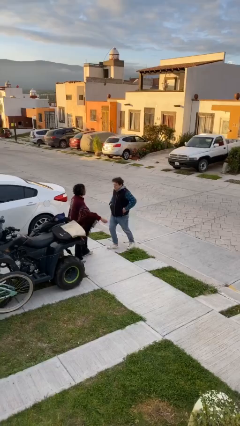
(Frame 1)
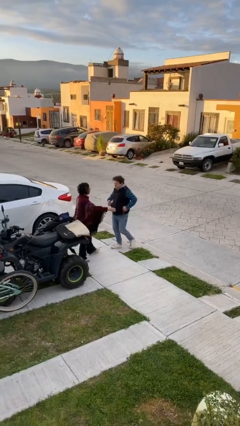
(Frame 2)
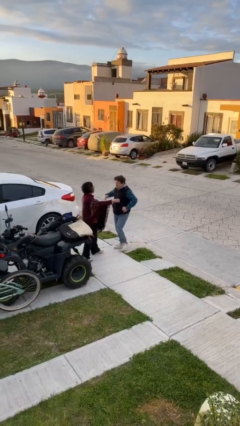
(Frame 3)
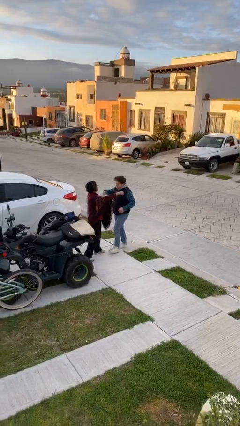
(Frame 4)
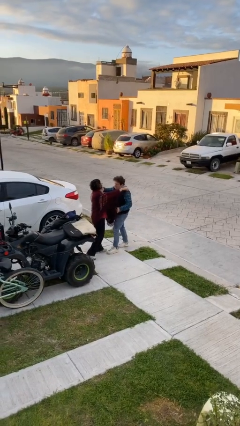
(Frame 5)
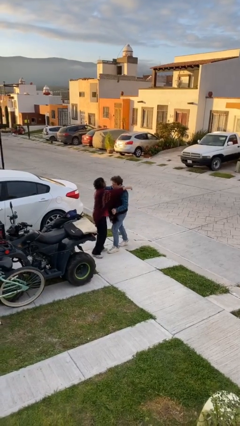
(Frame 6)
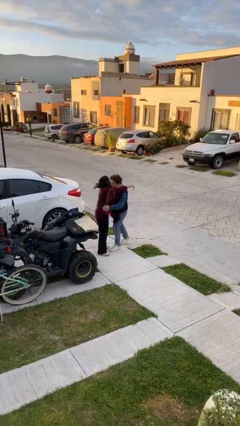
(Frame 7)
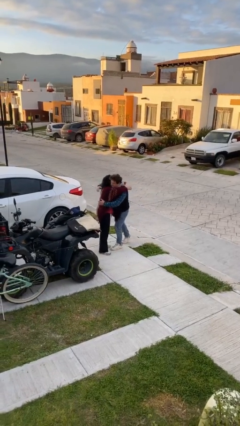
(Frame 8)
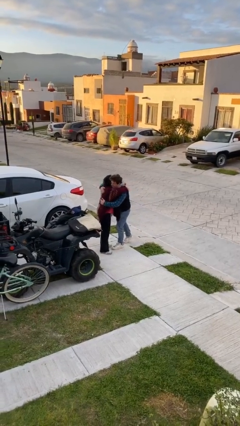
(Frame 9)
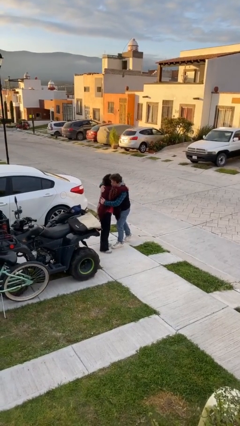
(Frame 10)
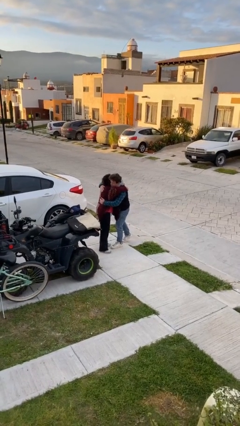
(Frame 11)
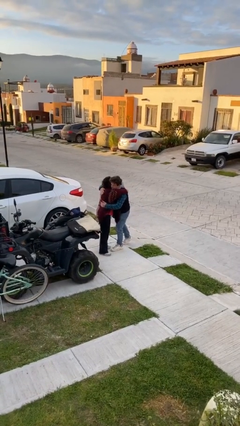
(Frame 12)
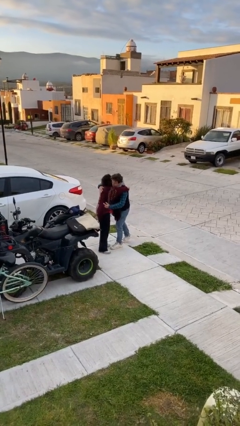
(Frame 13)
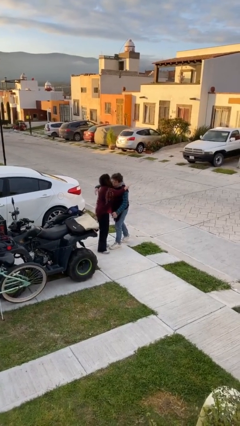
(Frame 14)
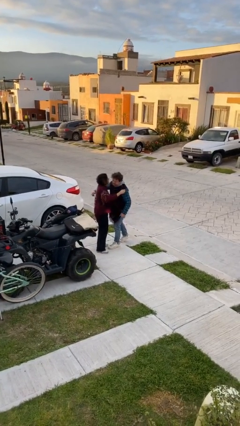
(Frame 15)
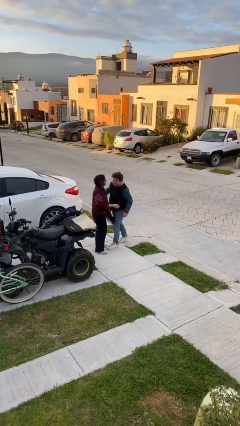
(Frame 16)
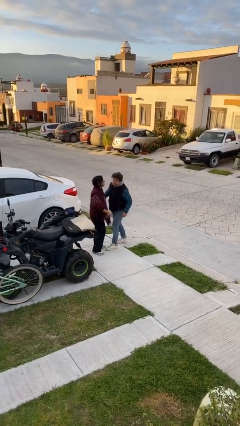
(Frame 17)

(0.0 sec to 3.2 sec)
person embraces person

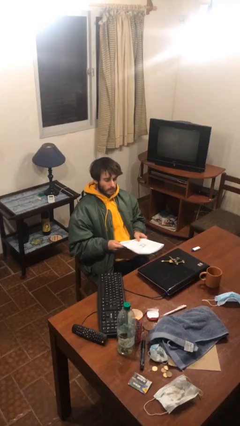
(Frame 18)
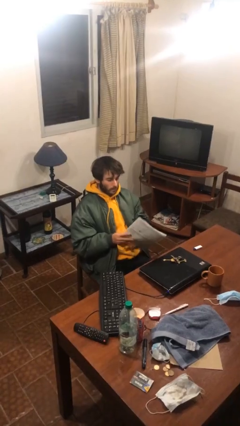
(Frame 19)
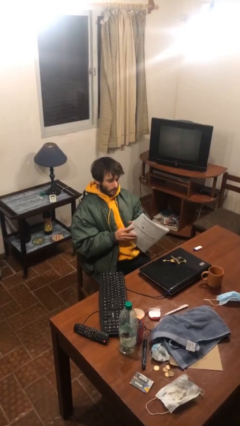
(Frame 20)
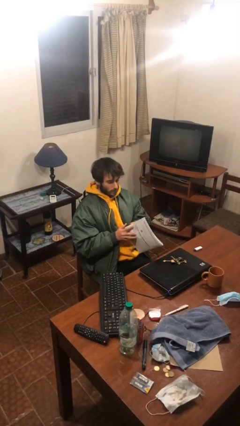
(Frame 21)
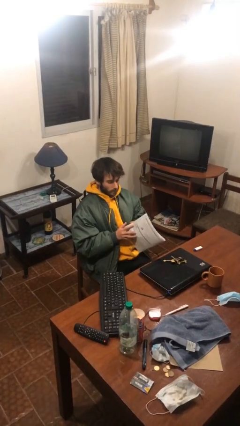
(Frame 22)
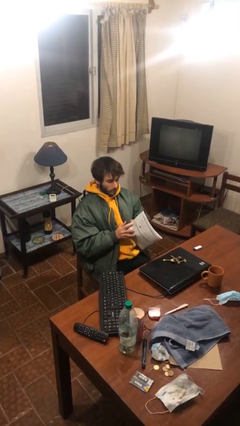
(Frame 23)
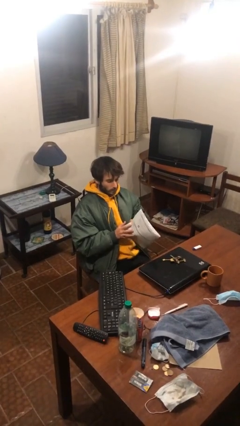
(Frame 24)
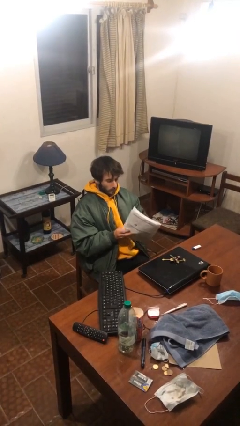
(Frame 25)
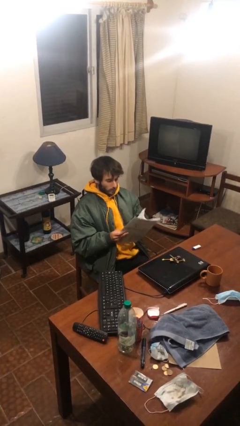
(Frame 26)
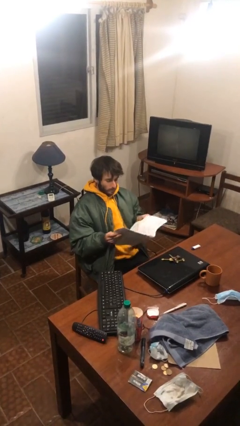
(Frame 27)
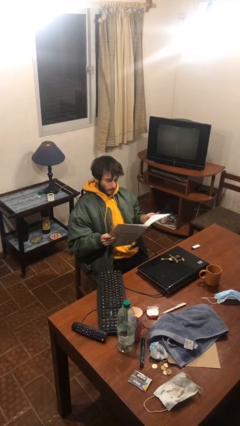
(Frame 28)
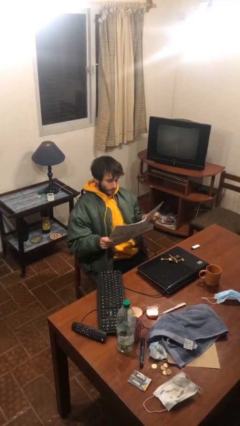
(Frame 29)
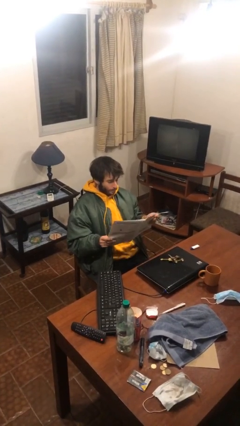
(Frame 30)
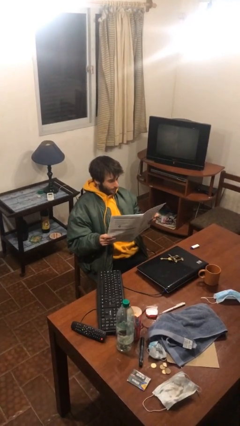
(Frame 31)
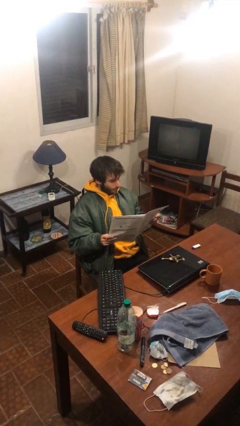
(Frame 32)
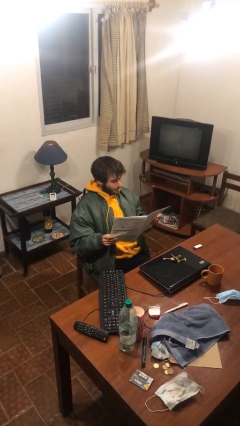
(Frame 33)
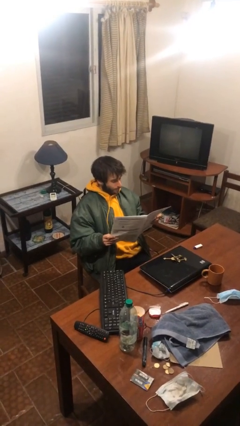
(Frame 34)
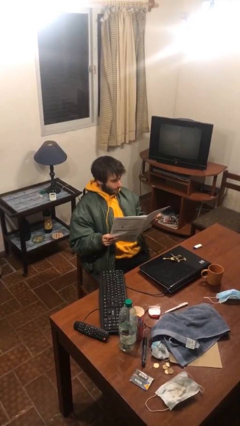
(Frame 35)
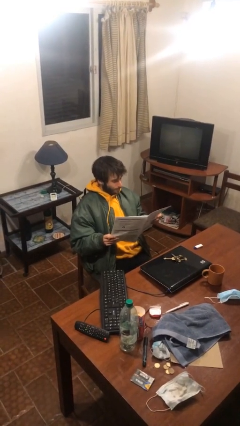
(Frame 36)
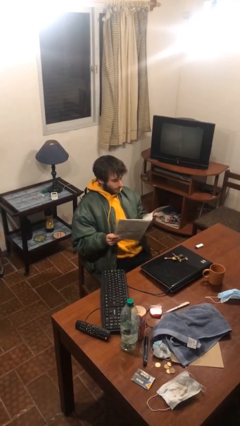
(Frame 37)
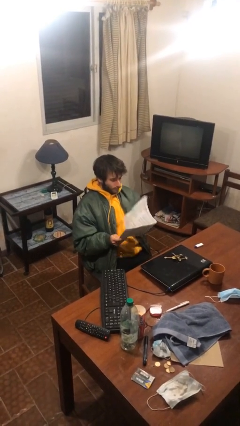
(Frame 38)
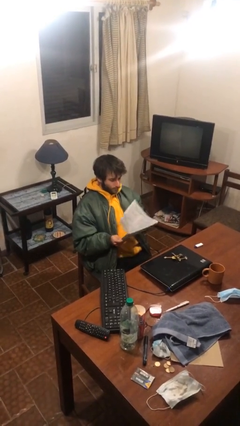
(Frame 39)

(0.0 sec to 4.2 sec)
person reads document

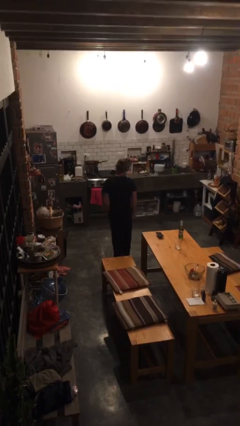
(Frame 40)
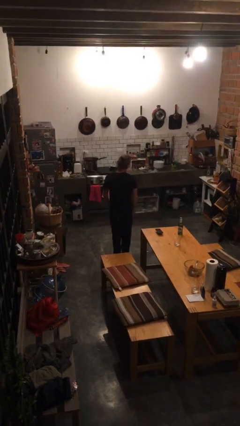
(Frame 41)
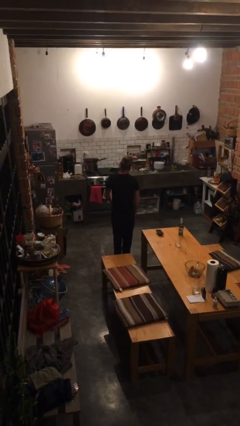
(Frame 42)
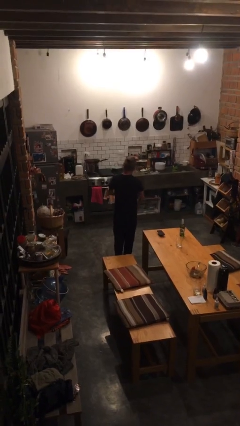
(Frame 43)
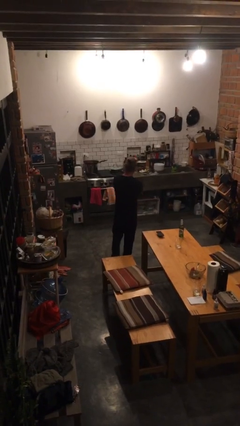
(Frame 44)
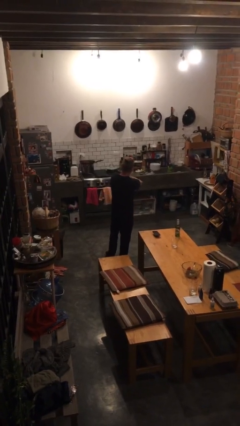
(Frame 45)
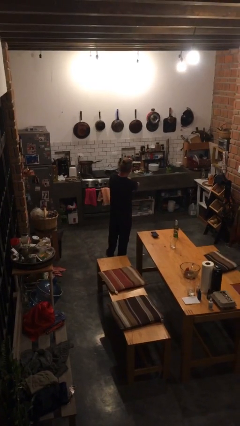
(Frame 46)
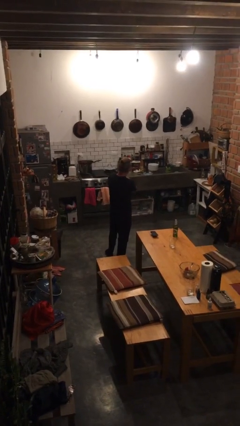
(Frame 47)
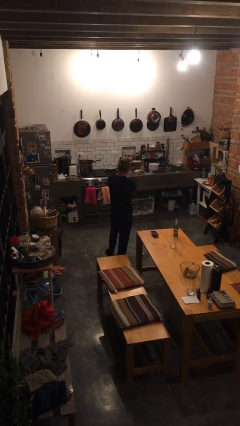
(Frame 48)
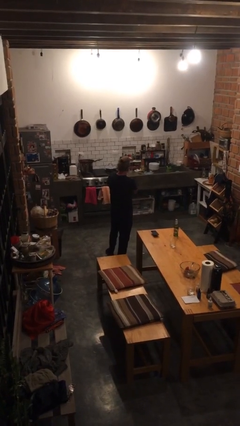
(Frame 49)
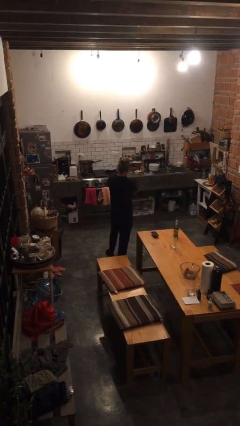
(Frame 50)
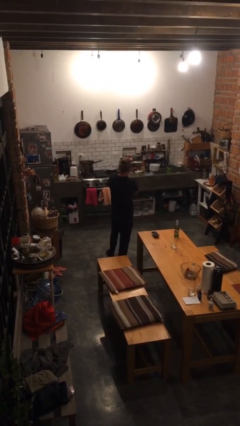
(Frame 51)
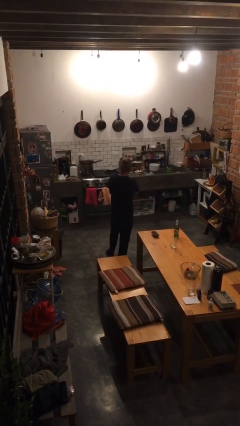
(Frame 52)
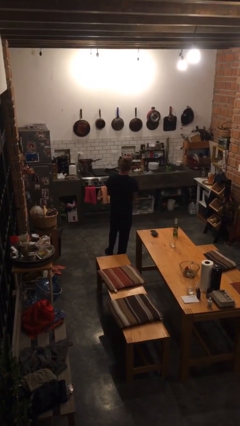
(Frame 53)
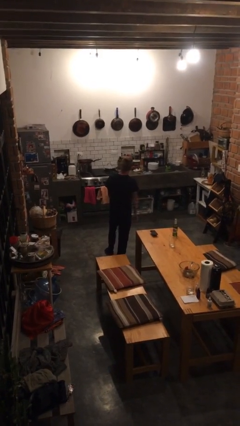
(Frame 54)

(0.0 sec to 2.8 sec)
person gestures arms x

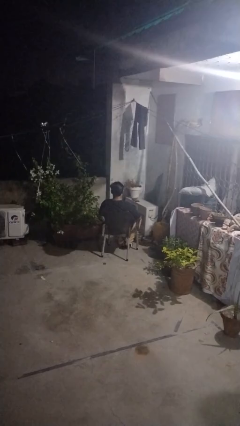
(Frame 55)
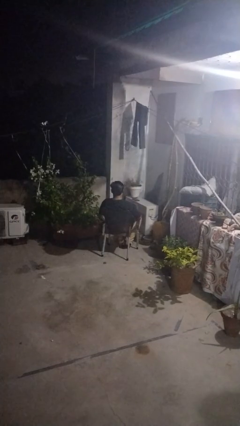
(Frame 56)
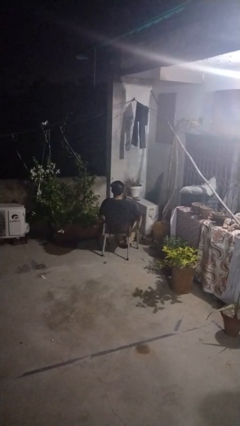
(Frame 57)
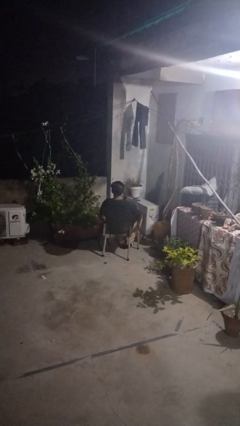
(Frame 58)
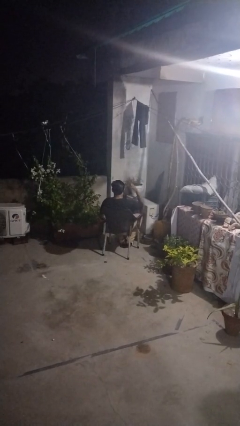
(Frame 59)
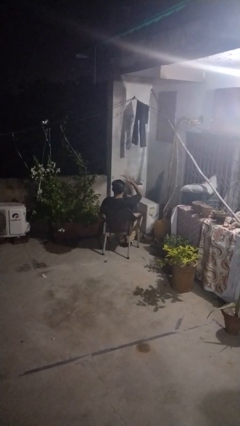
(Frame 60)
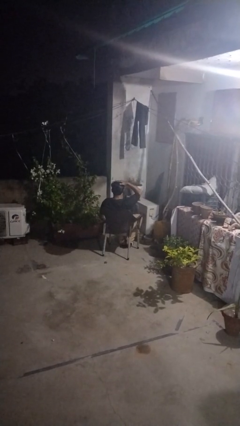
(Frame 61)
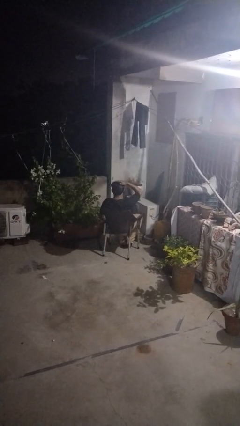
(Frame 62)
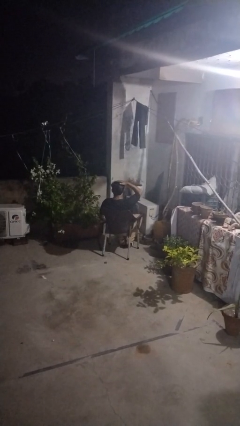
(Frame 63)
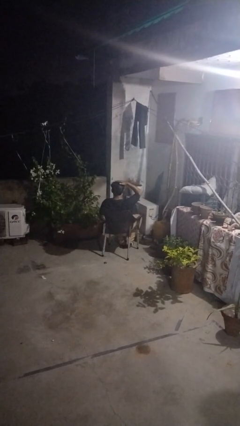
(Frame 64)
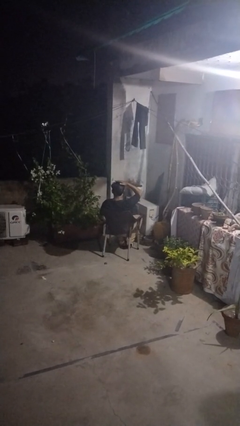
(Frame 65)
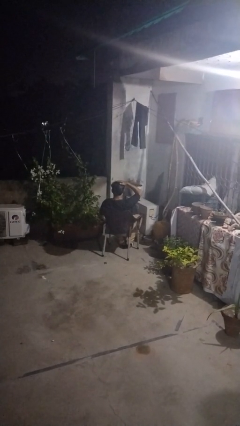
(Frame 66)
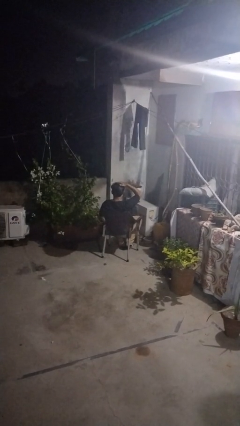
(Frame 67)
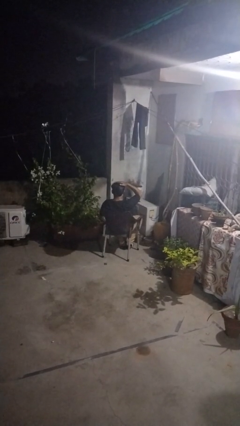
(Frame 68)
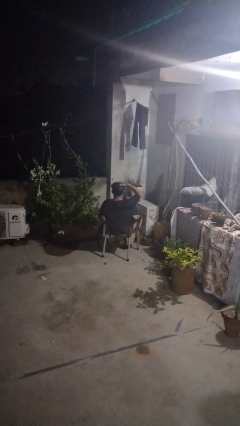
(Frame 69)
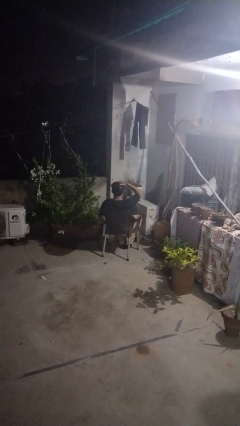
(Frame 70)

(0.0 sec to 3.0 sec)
person pats head

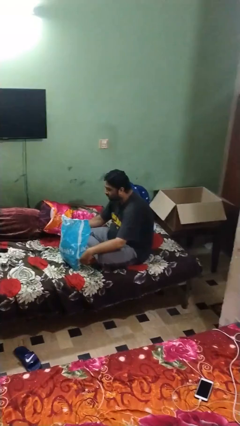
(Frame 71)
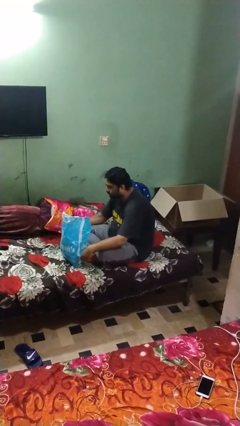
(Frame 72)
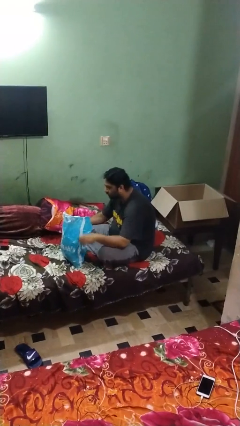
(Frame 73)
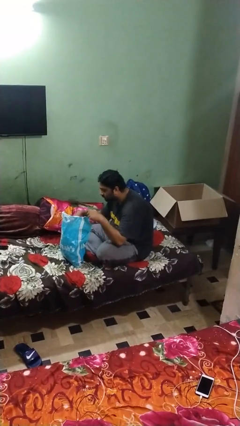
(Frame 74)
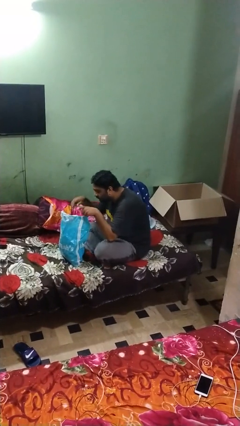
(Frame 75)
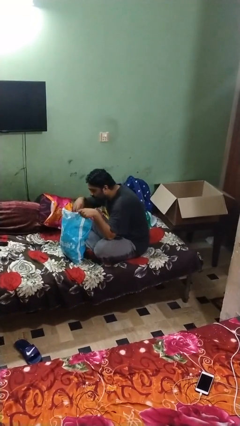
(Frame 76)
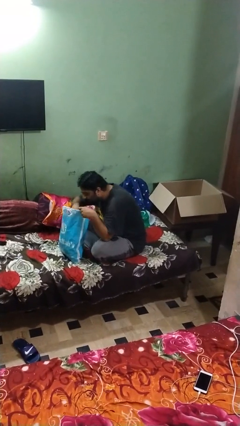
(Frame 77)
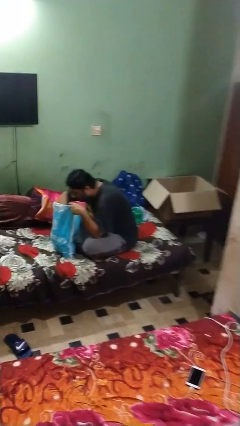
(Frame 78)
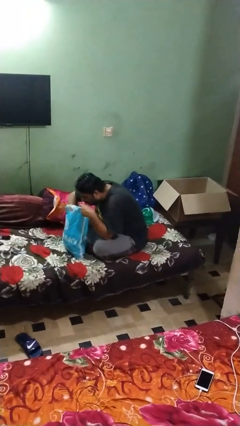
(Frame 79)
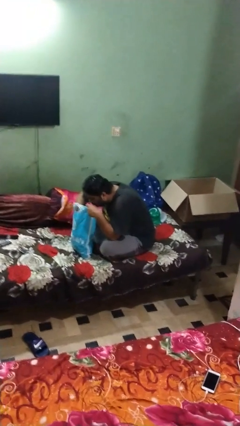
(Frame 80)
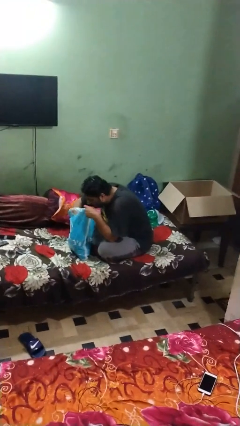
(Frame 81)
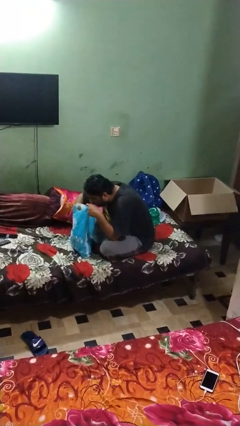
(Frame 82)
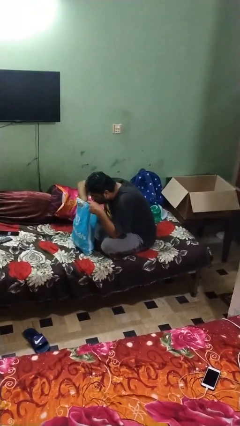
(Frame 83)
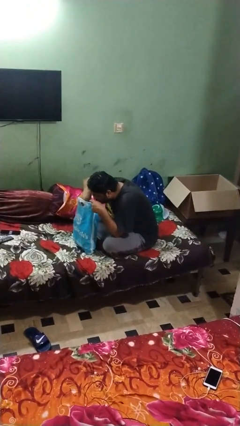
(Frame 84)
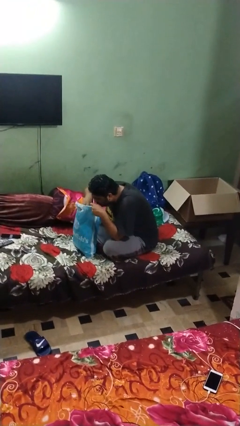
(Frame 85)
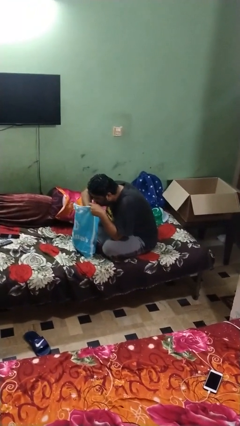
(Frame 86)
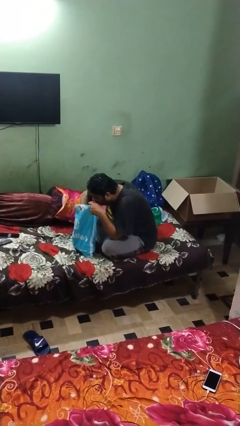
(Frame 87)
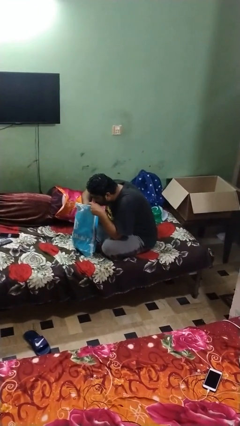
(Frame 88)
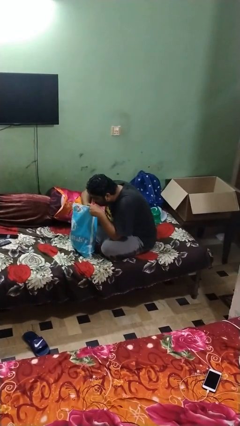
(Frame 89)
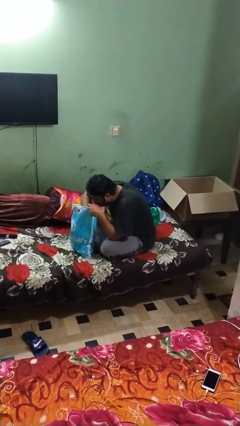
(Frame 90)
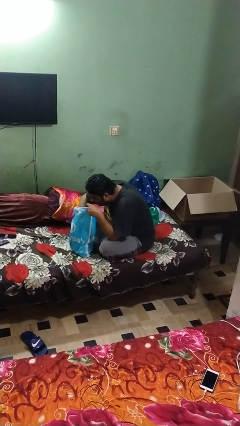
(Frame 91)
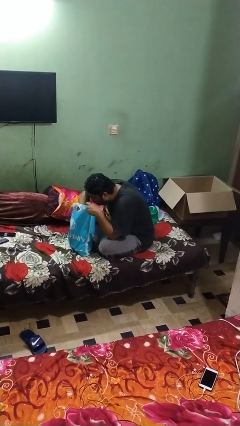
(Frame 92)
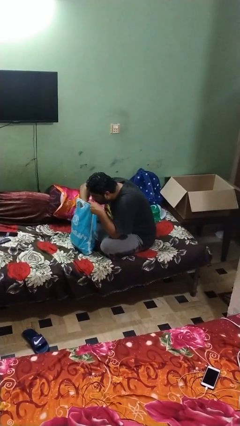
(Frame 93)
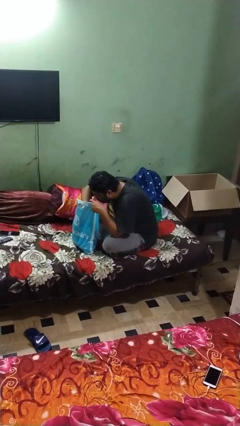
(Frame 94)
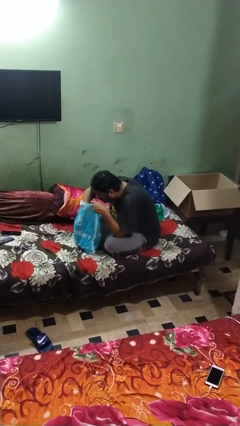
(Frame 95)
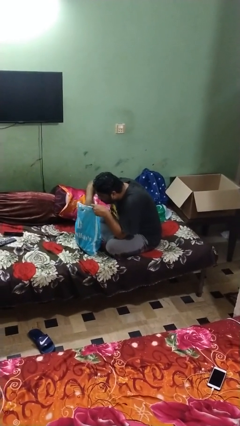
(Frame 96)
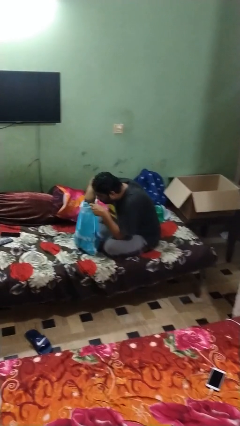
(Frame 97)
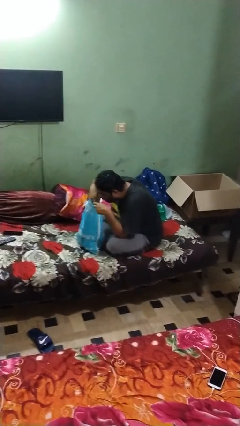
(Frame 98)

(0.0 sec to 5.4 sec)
person searches in bag
